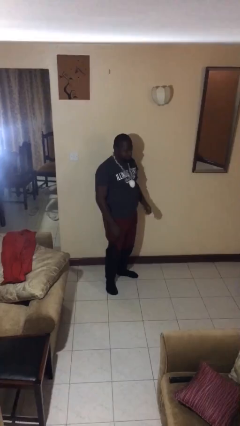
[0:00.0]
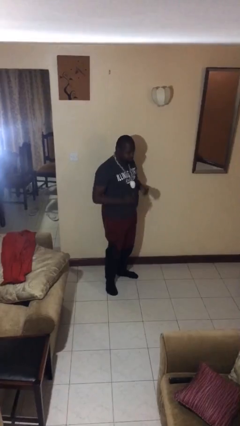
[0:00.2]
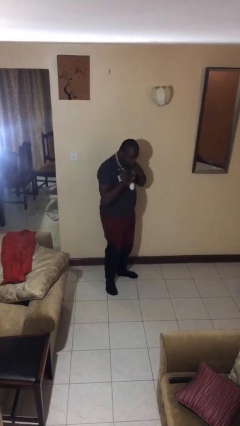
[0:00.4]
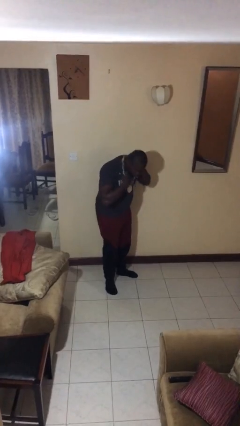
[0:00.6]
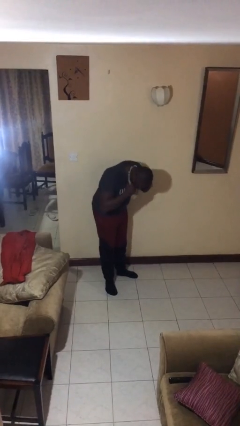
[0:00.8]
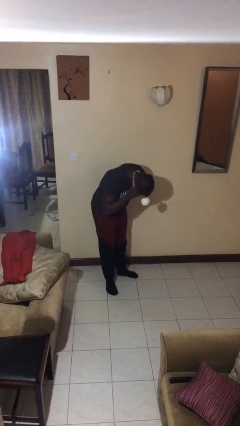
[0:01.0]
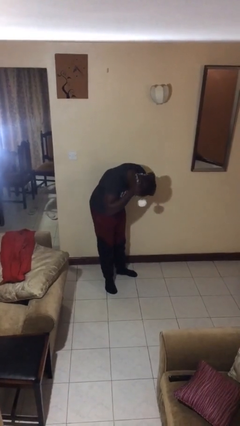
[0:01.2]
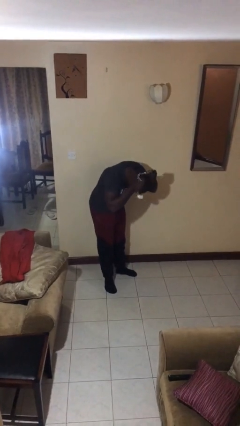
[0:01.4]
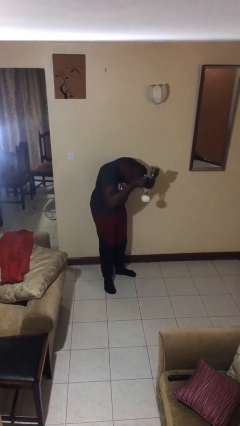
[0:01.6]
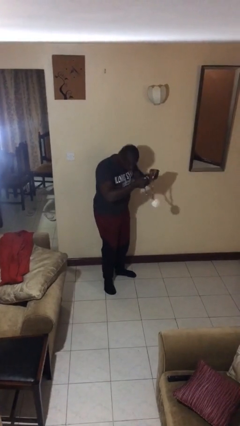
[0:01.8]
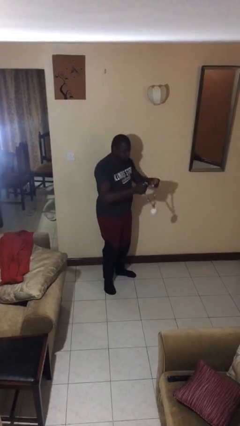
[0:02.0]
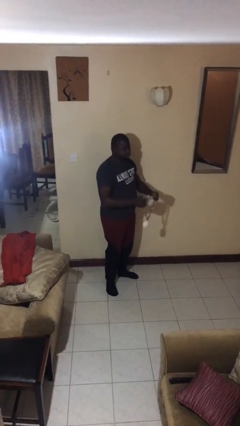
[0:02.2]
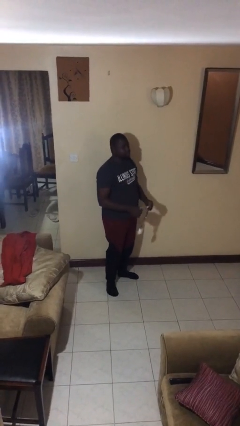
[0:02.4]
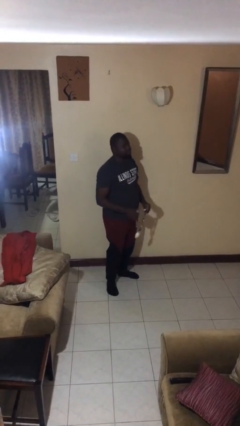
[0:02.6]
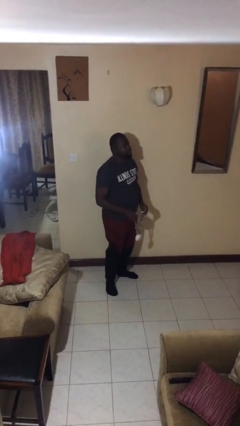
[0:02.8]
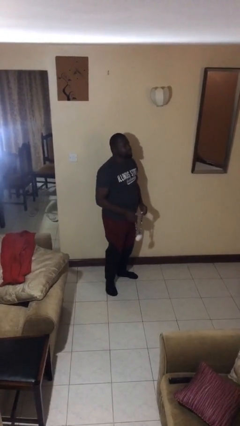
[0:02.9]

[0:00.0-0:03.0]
person takes off necklace

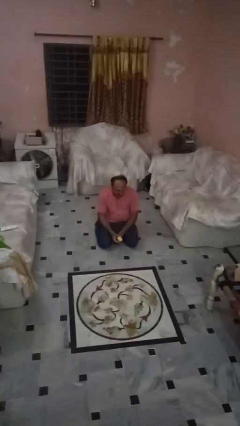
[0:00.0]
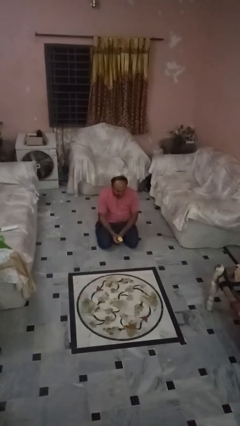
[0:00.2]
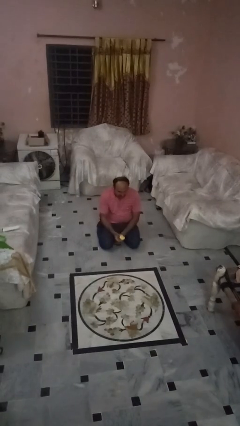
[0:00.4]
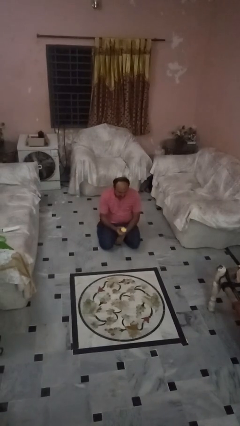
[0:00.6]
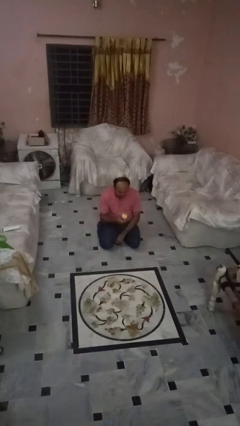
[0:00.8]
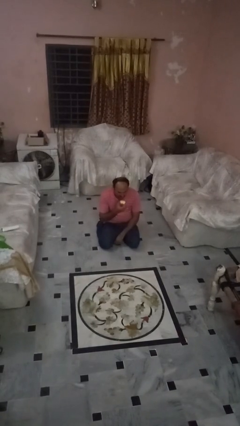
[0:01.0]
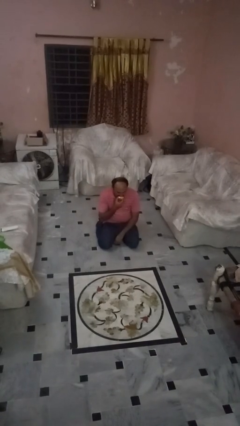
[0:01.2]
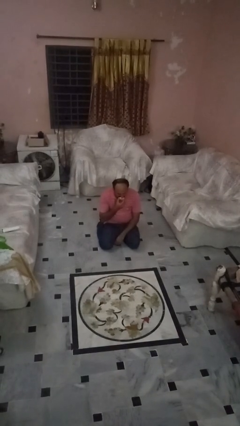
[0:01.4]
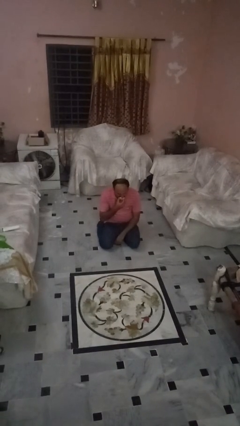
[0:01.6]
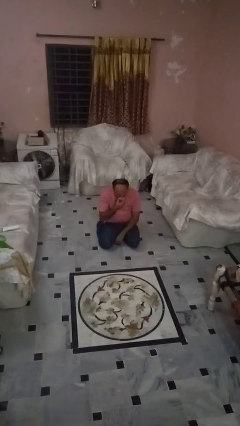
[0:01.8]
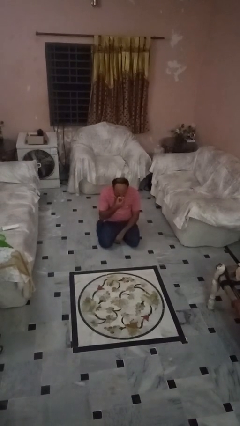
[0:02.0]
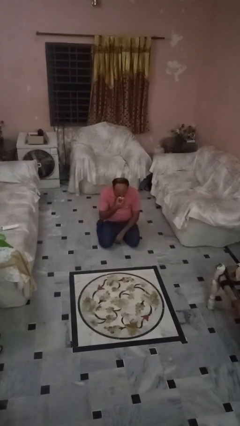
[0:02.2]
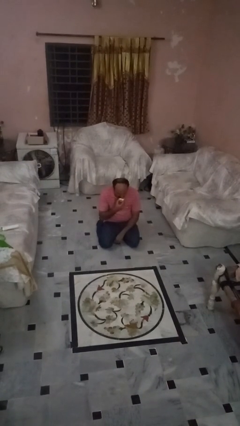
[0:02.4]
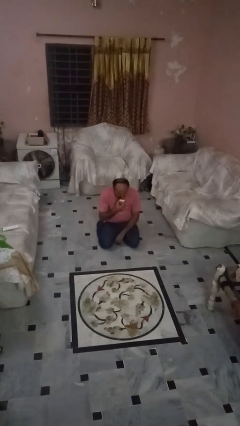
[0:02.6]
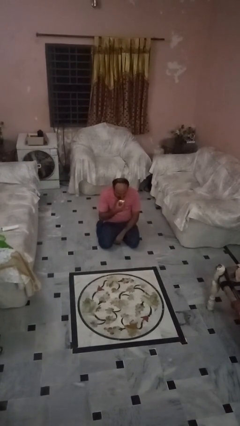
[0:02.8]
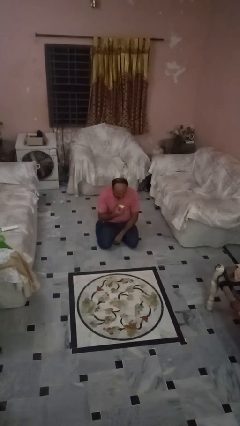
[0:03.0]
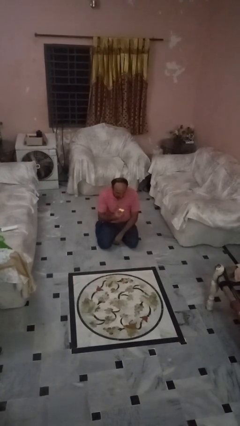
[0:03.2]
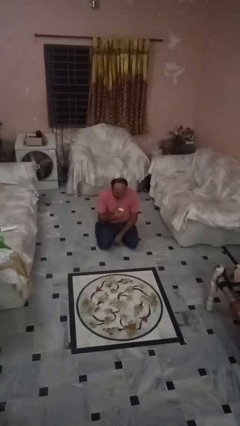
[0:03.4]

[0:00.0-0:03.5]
person eats apple

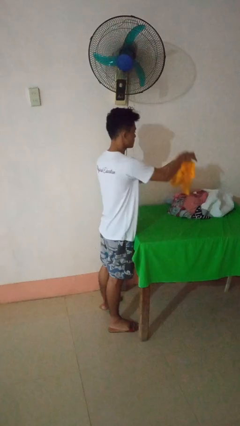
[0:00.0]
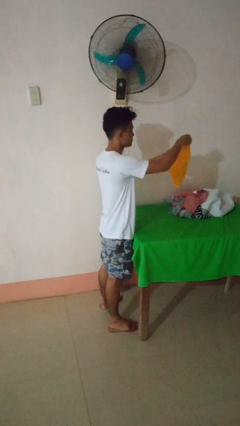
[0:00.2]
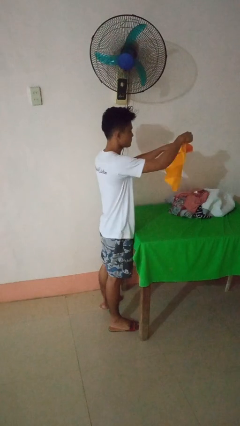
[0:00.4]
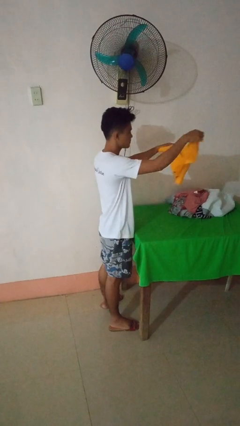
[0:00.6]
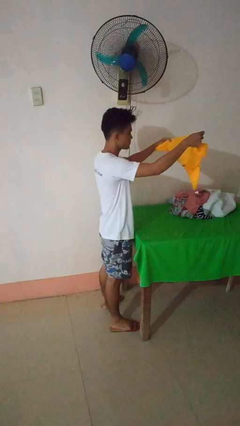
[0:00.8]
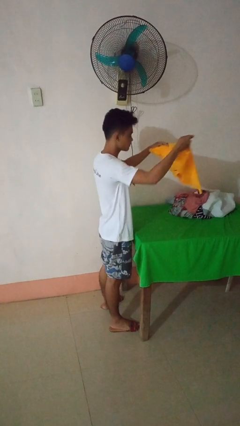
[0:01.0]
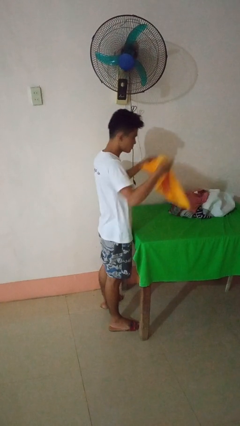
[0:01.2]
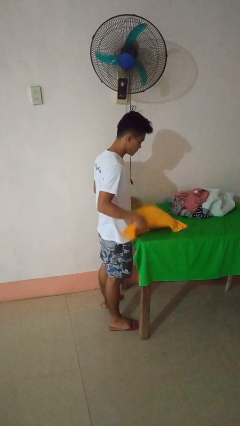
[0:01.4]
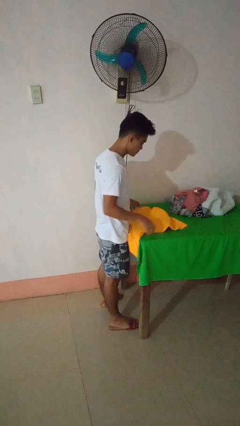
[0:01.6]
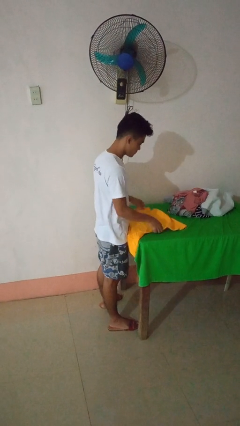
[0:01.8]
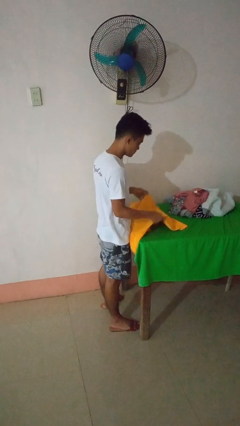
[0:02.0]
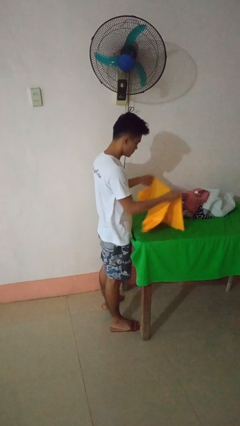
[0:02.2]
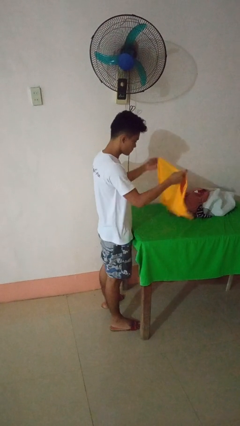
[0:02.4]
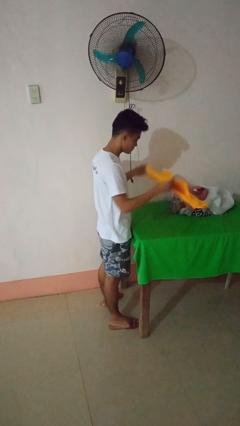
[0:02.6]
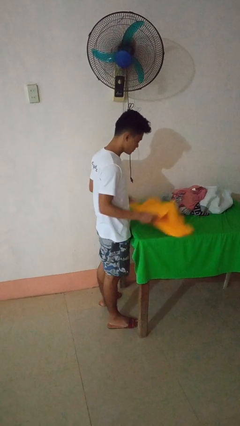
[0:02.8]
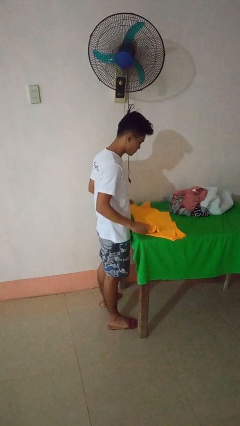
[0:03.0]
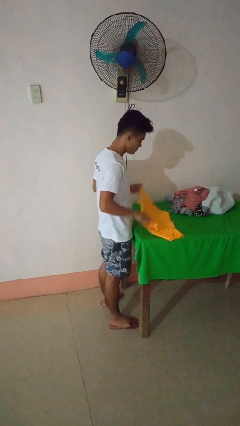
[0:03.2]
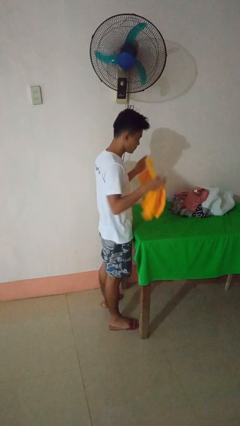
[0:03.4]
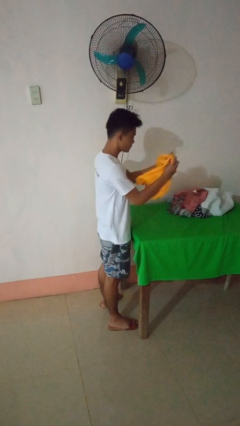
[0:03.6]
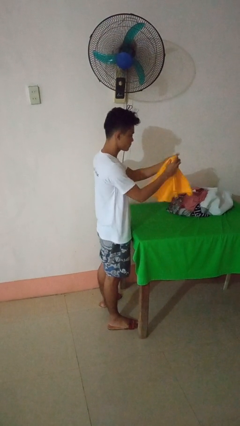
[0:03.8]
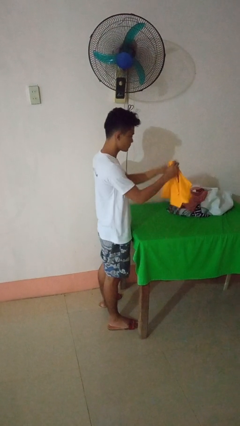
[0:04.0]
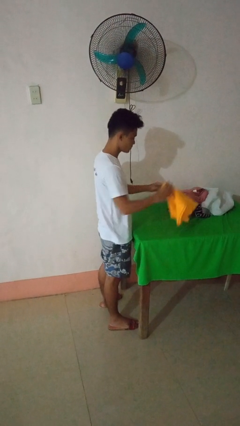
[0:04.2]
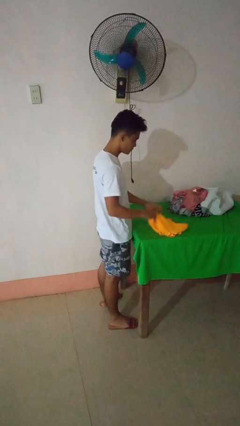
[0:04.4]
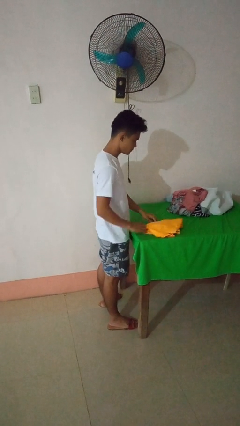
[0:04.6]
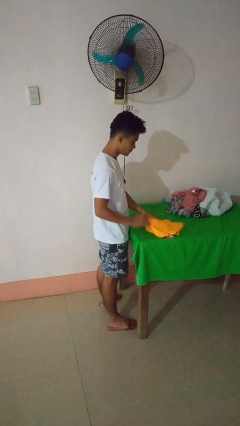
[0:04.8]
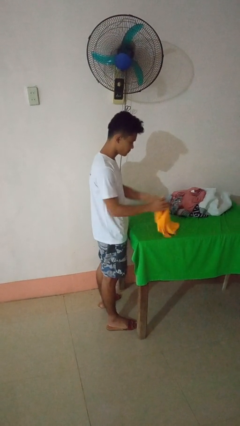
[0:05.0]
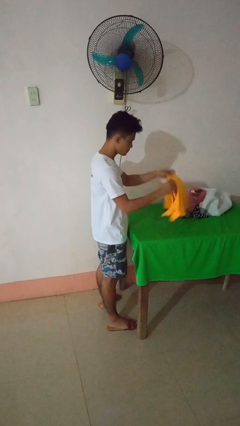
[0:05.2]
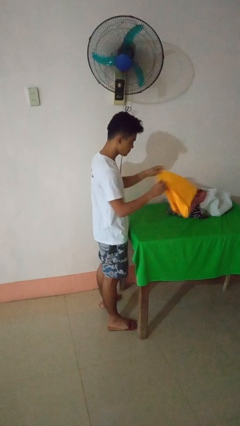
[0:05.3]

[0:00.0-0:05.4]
person folds shirt

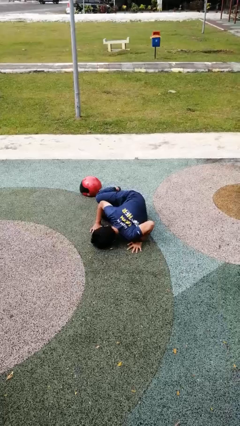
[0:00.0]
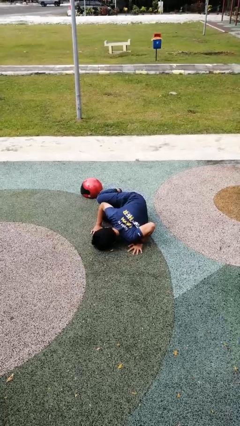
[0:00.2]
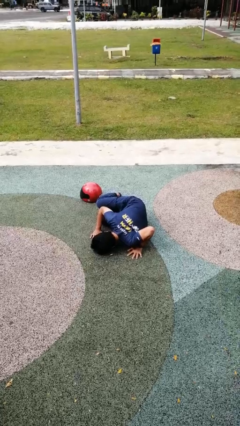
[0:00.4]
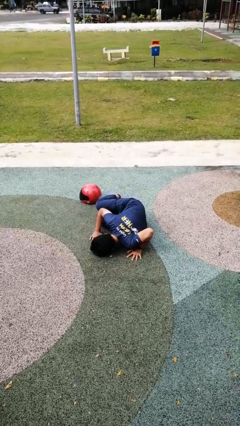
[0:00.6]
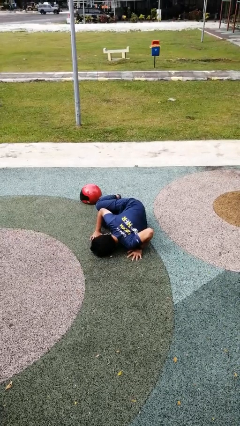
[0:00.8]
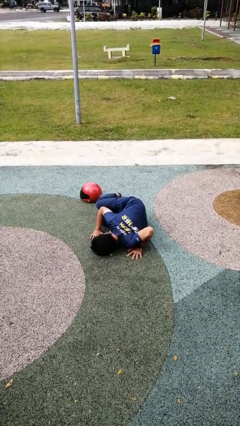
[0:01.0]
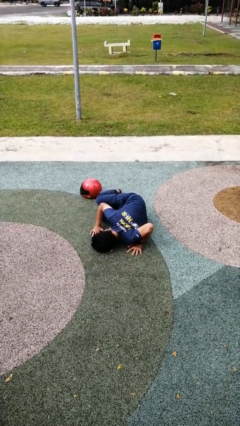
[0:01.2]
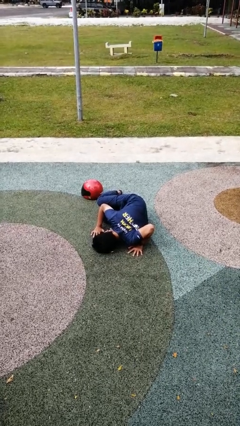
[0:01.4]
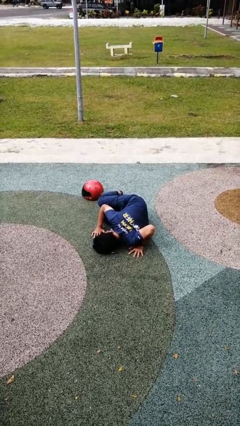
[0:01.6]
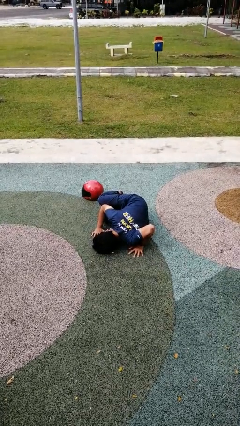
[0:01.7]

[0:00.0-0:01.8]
person lies down on floor

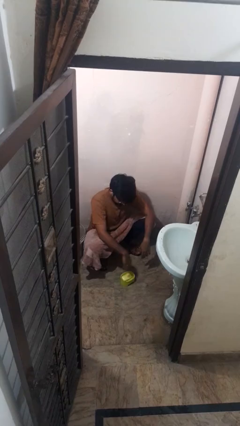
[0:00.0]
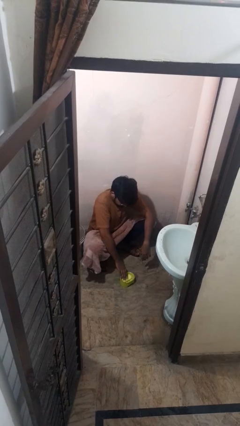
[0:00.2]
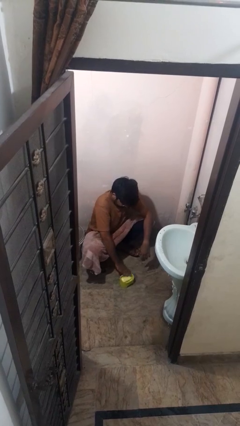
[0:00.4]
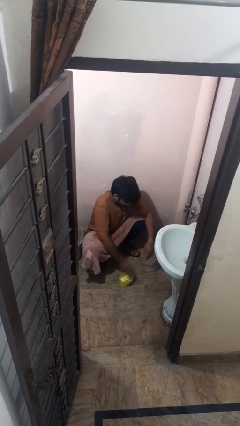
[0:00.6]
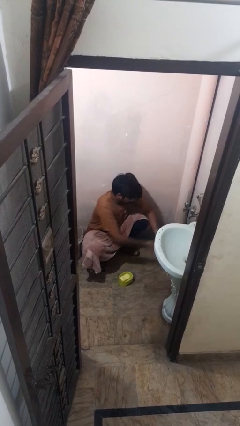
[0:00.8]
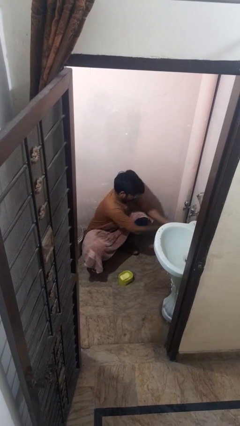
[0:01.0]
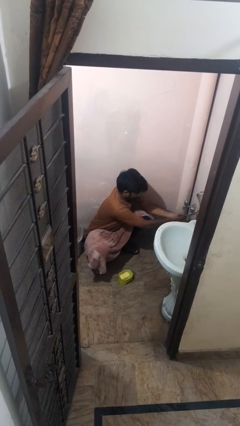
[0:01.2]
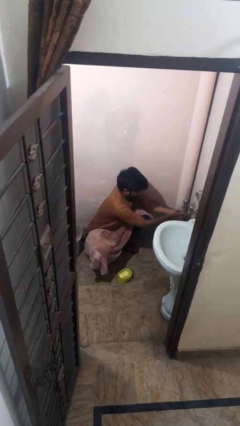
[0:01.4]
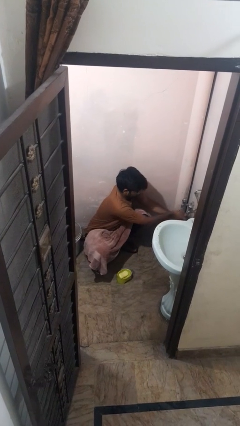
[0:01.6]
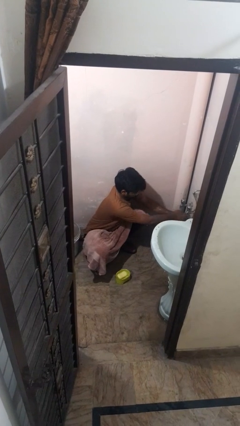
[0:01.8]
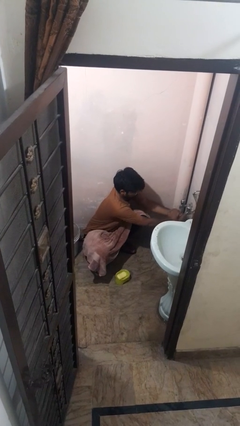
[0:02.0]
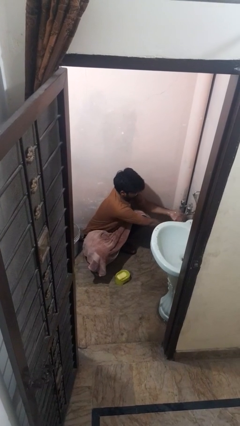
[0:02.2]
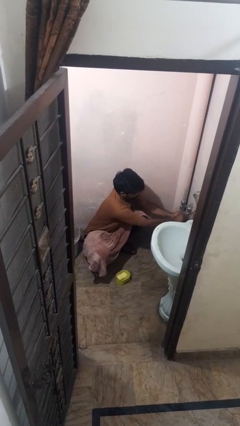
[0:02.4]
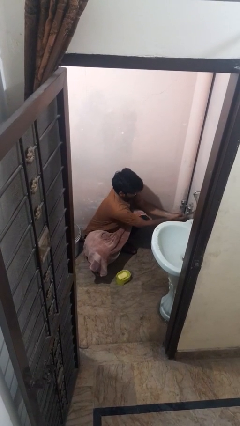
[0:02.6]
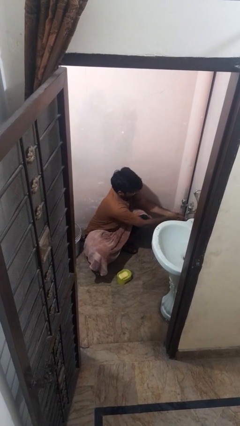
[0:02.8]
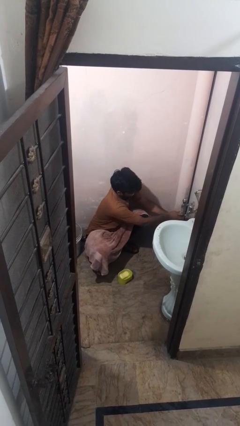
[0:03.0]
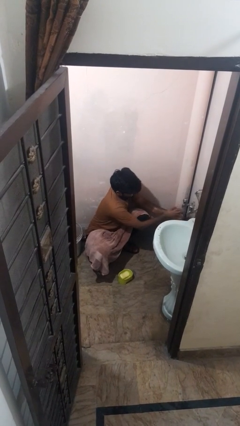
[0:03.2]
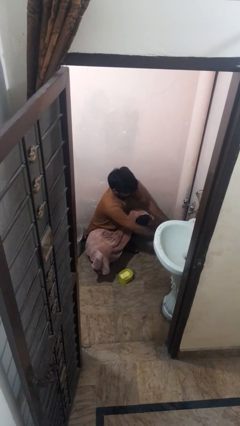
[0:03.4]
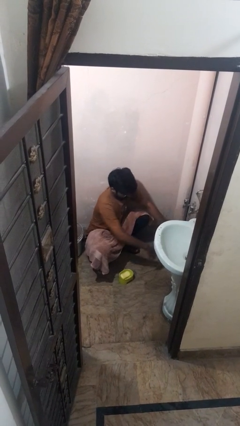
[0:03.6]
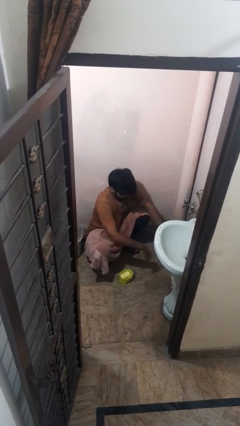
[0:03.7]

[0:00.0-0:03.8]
person washes hands

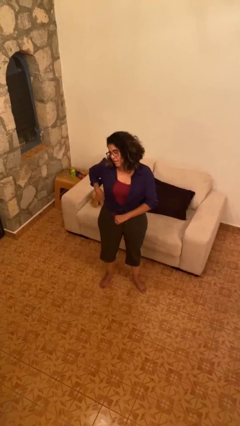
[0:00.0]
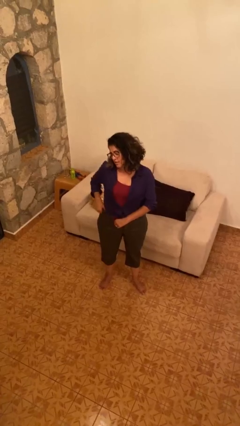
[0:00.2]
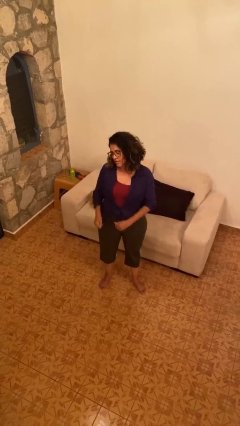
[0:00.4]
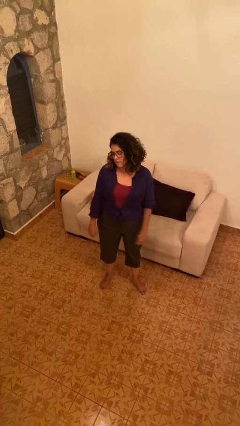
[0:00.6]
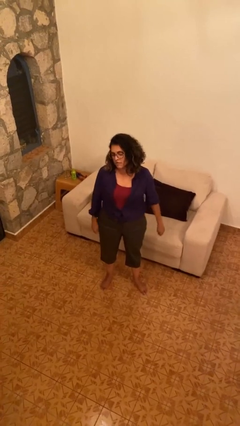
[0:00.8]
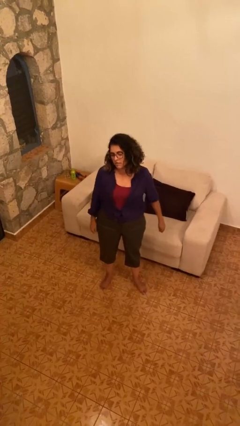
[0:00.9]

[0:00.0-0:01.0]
person hikes up pants
